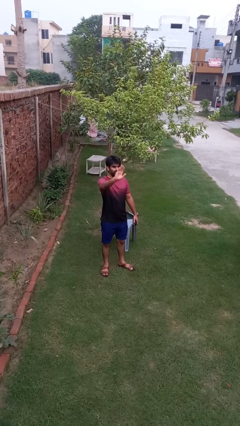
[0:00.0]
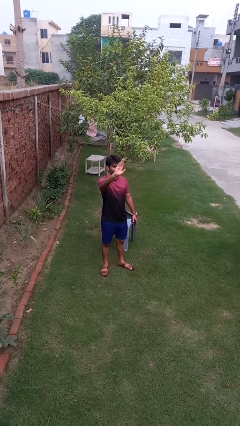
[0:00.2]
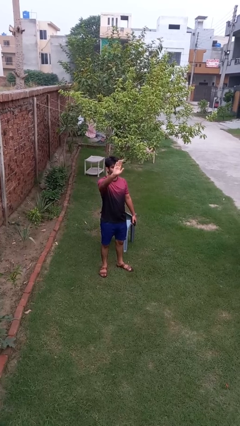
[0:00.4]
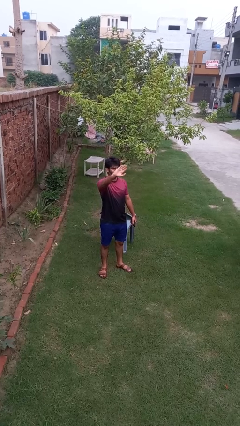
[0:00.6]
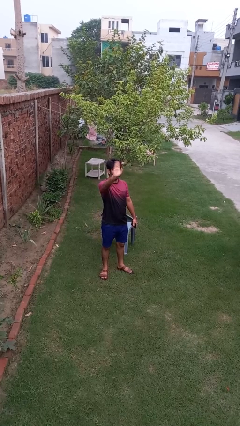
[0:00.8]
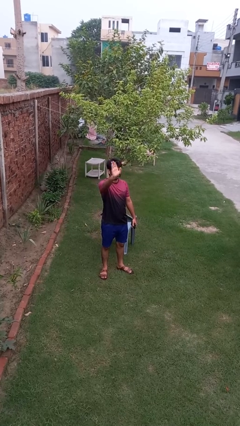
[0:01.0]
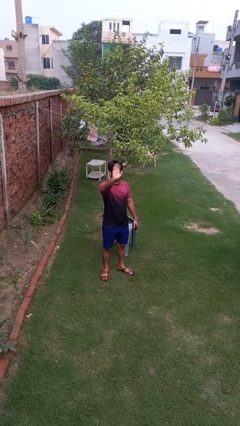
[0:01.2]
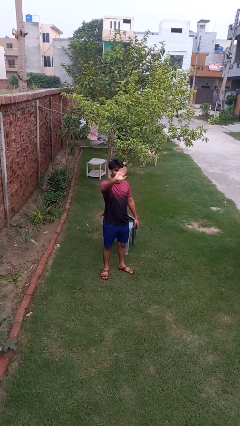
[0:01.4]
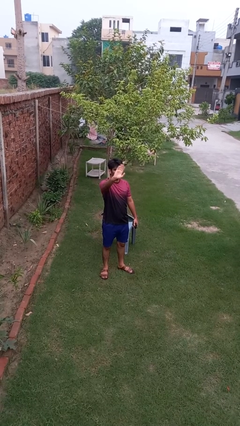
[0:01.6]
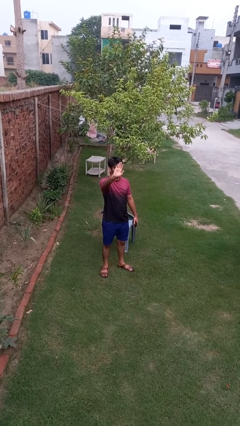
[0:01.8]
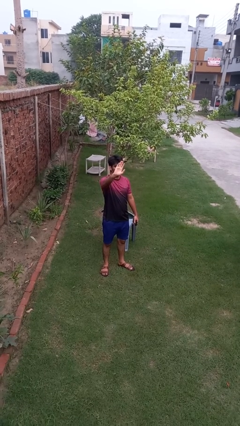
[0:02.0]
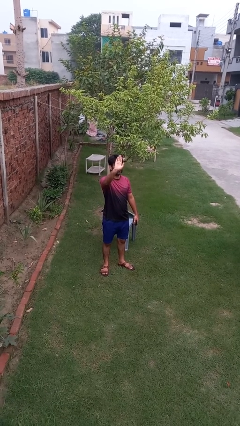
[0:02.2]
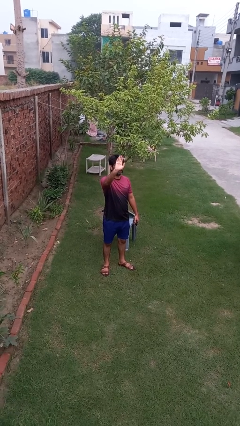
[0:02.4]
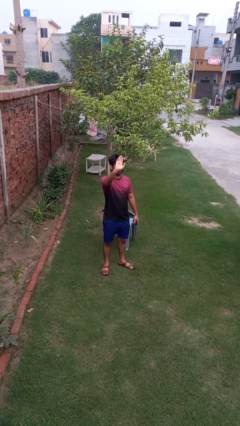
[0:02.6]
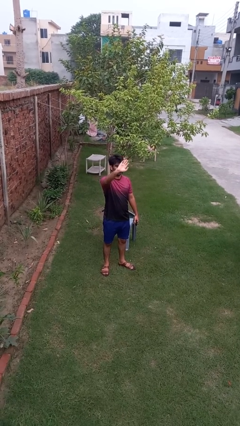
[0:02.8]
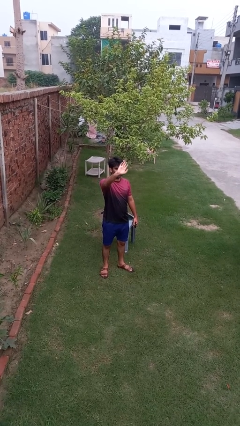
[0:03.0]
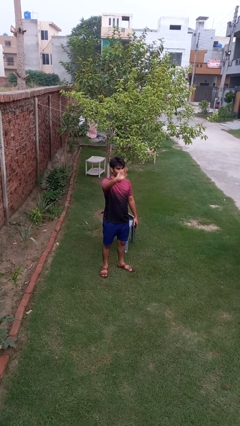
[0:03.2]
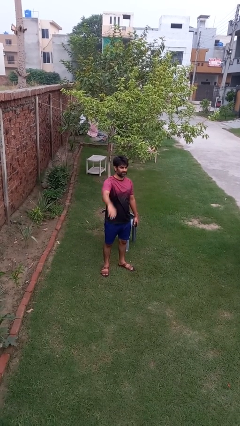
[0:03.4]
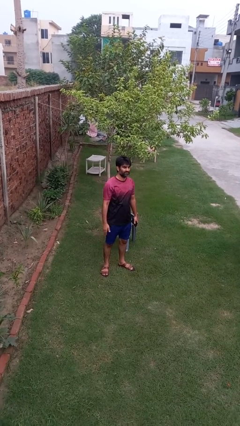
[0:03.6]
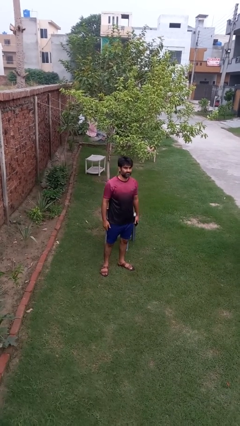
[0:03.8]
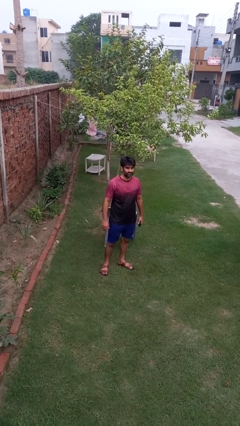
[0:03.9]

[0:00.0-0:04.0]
person waves at person

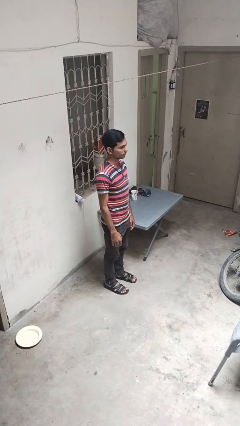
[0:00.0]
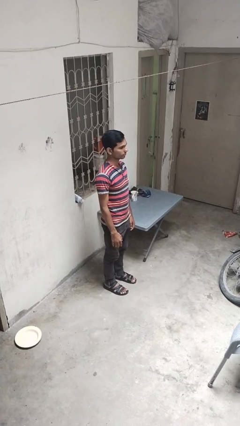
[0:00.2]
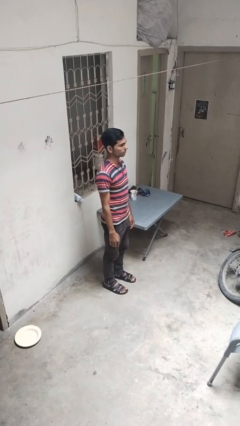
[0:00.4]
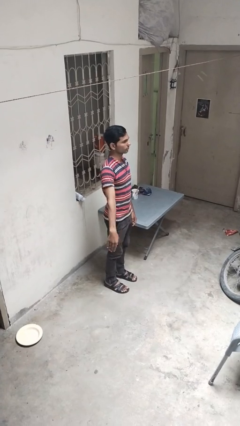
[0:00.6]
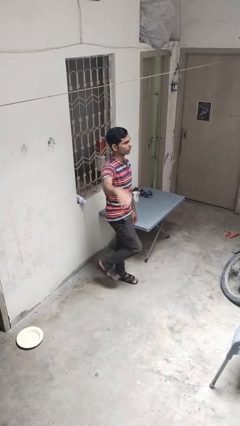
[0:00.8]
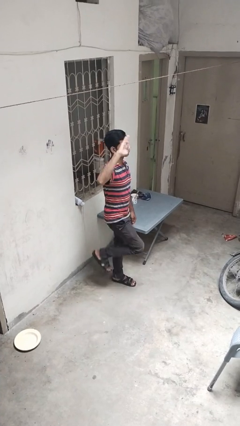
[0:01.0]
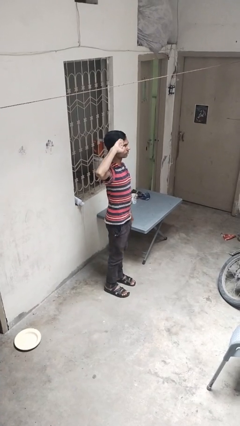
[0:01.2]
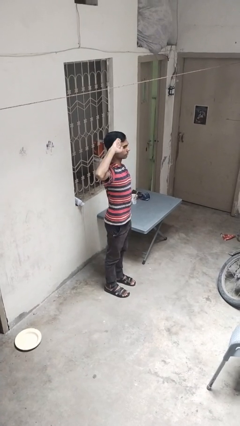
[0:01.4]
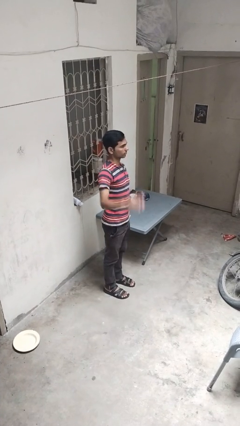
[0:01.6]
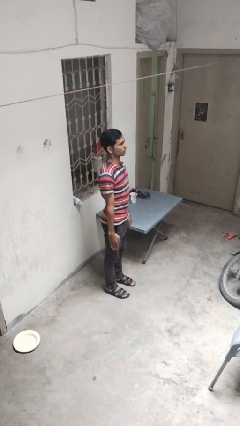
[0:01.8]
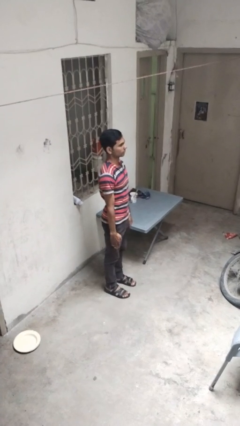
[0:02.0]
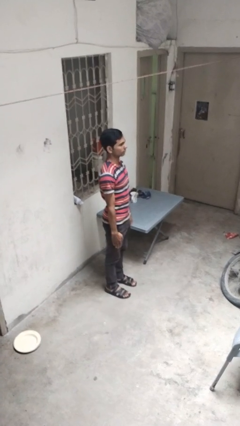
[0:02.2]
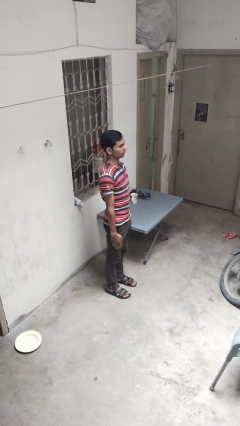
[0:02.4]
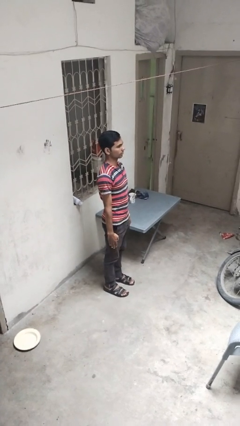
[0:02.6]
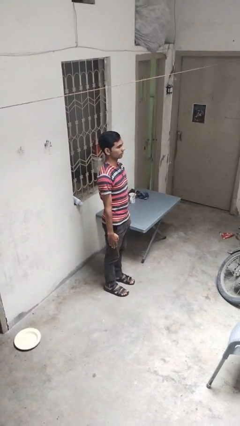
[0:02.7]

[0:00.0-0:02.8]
person salutes

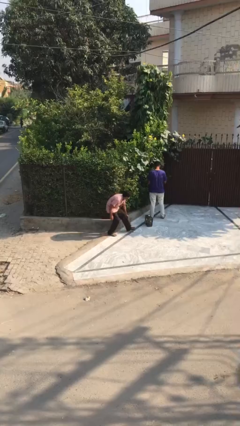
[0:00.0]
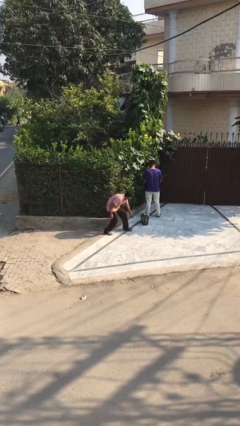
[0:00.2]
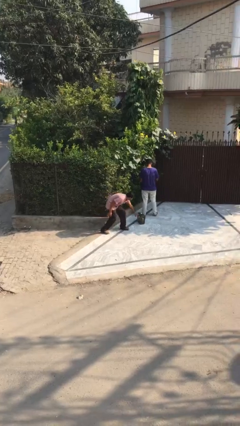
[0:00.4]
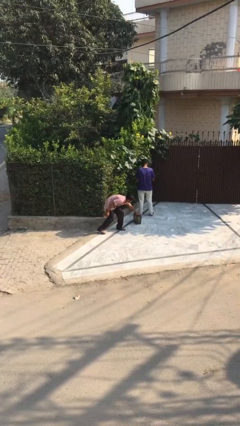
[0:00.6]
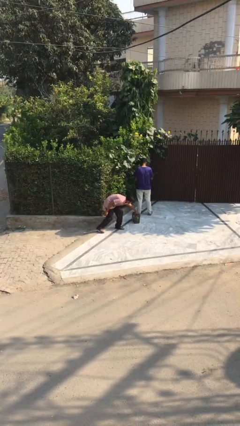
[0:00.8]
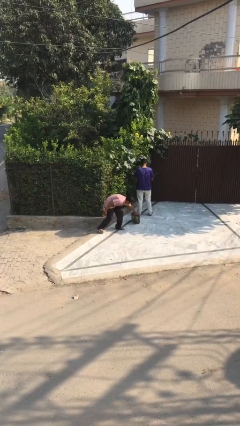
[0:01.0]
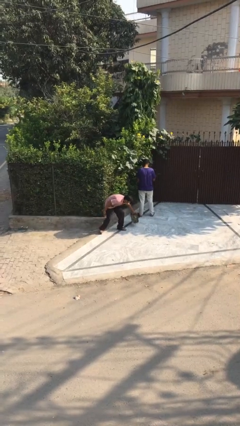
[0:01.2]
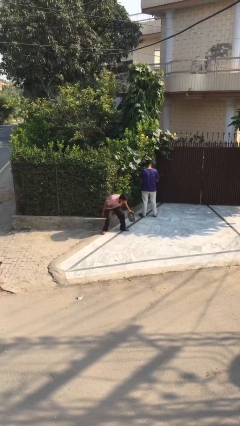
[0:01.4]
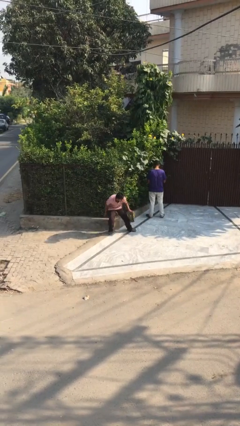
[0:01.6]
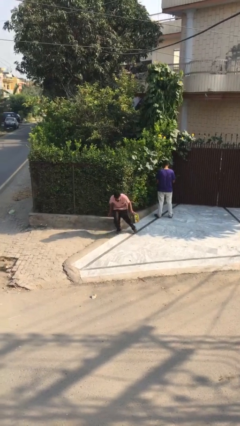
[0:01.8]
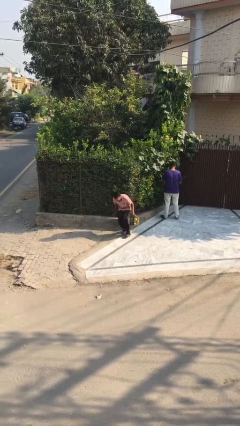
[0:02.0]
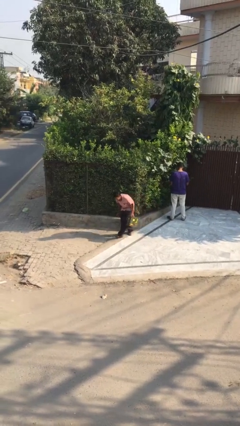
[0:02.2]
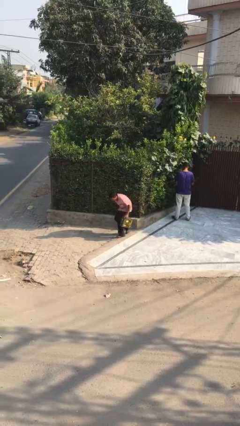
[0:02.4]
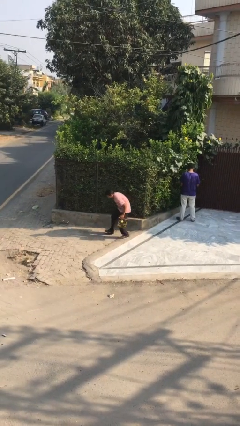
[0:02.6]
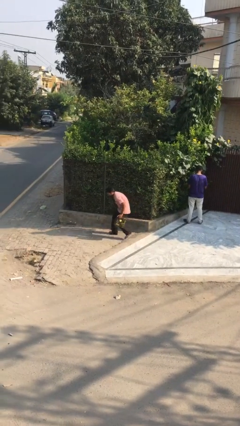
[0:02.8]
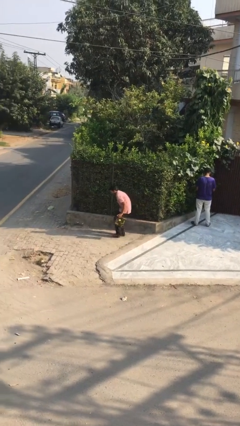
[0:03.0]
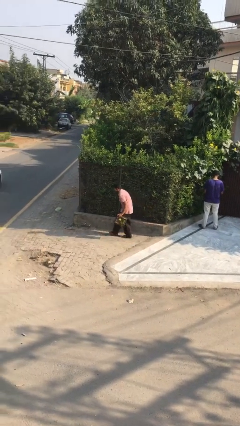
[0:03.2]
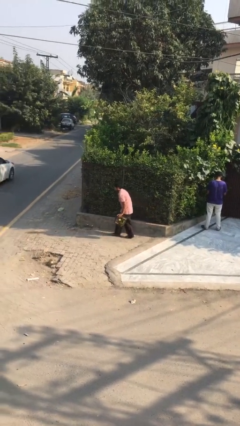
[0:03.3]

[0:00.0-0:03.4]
person steals object from person

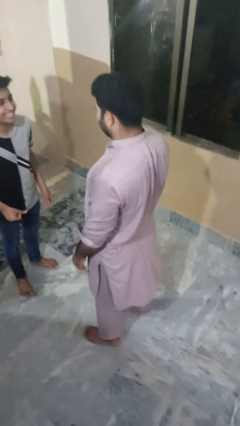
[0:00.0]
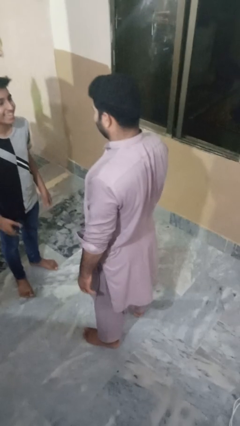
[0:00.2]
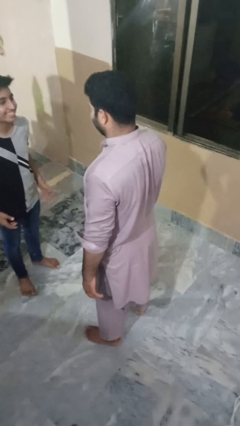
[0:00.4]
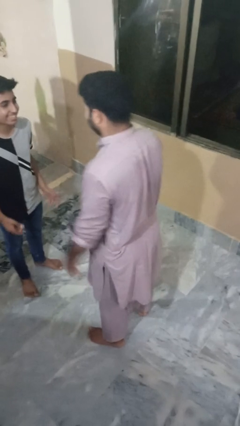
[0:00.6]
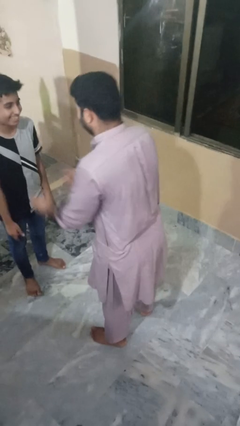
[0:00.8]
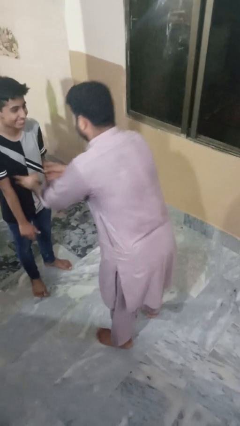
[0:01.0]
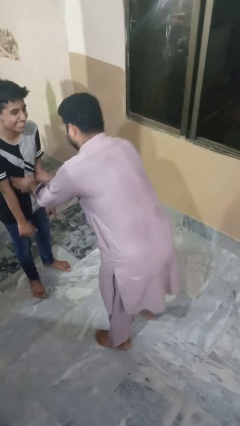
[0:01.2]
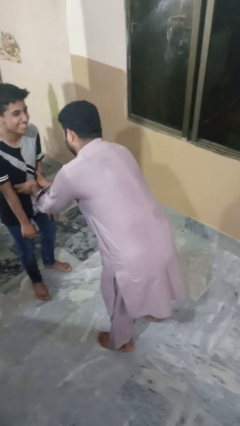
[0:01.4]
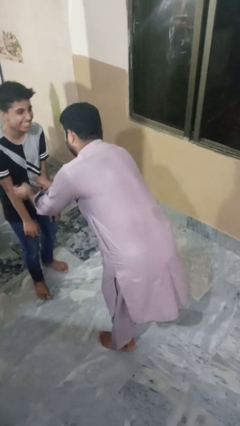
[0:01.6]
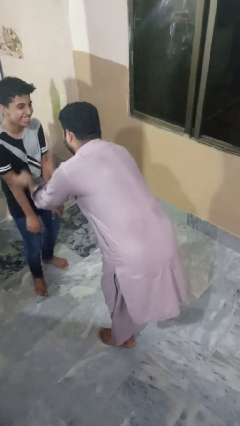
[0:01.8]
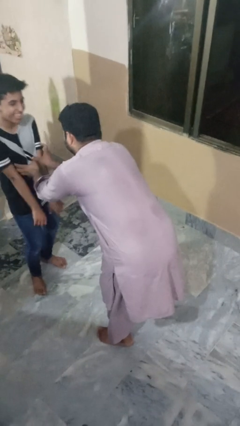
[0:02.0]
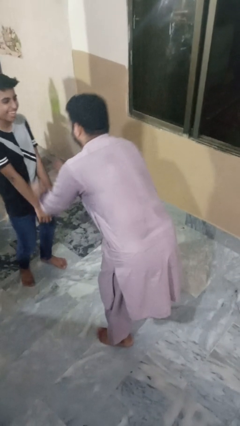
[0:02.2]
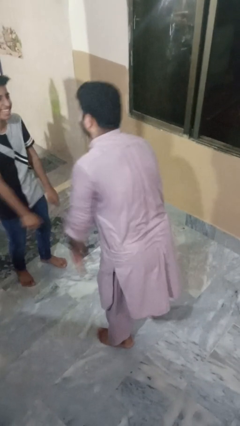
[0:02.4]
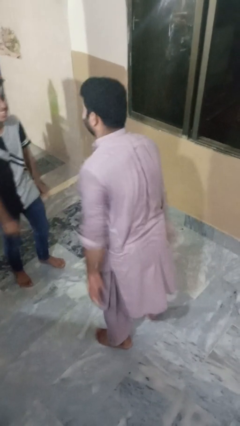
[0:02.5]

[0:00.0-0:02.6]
person tickles person

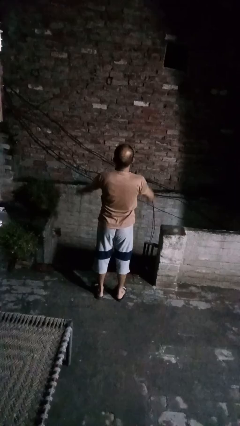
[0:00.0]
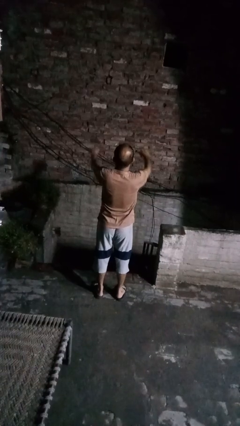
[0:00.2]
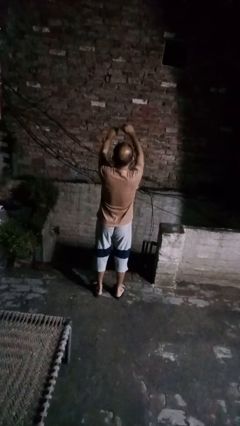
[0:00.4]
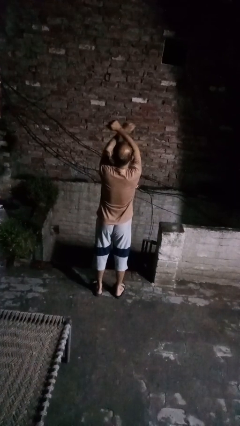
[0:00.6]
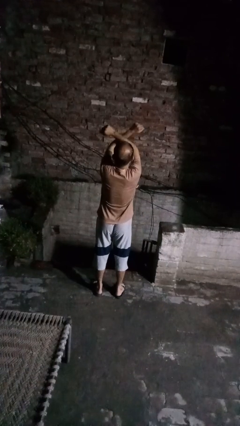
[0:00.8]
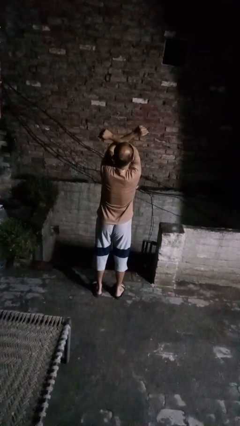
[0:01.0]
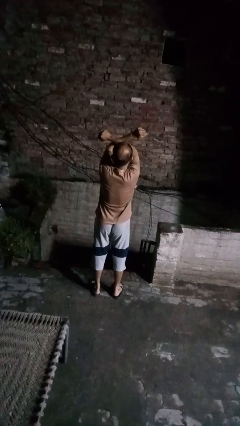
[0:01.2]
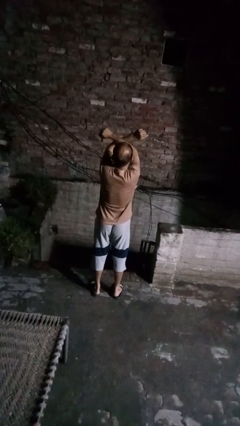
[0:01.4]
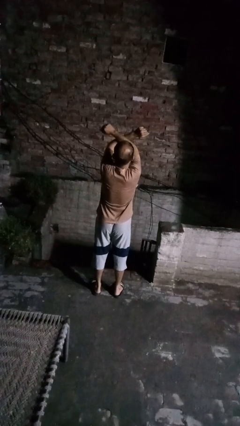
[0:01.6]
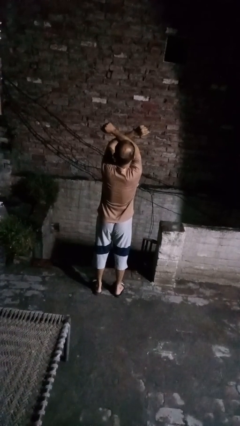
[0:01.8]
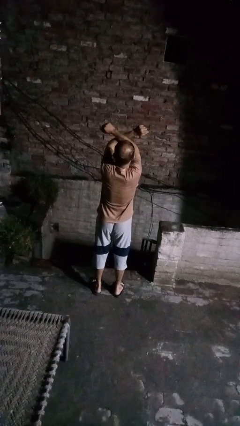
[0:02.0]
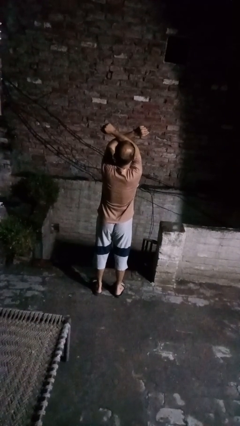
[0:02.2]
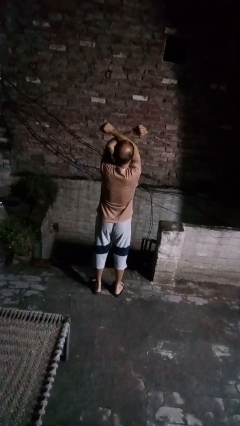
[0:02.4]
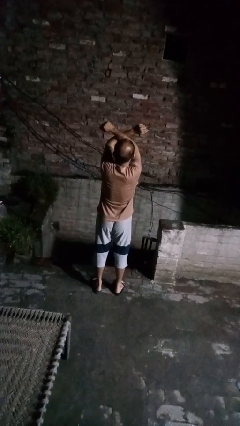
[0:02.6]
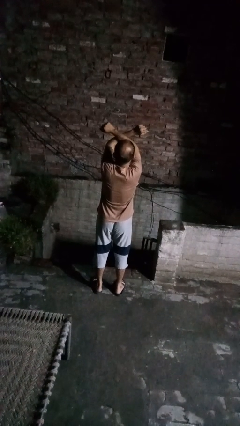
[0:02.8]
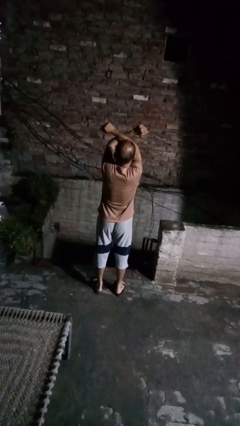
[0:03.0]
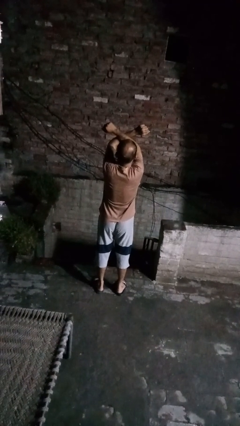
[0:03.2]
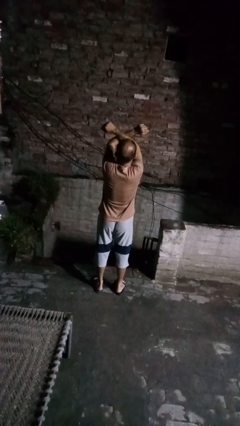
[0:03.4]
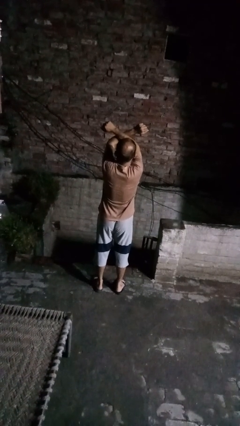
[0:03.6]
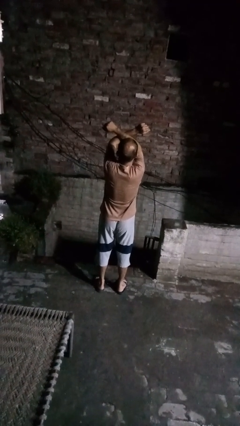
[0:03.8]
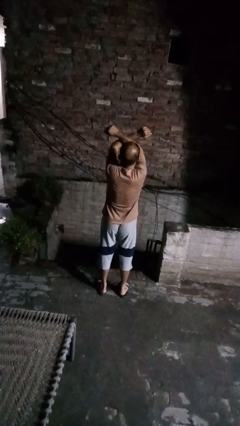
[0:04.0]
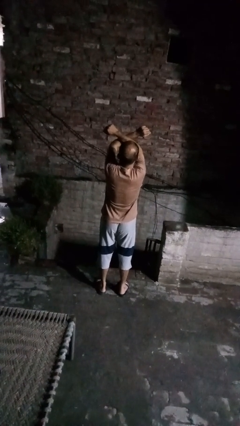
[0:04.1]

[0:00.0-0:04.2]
person gestures arms x

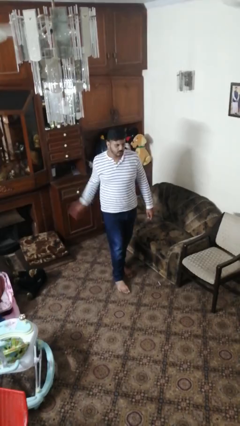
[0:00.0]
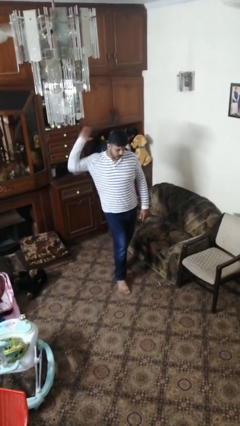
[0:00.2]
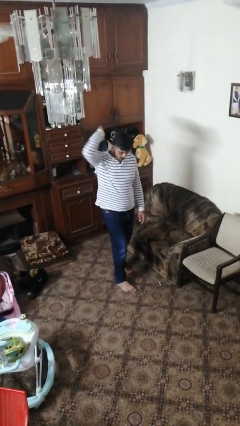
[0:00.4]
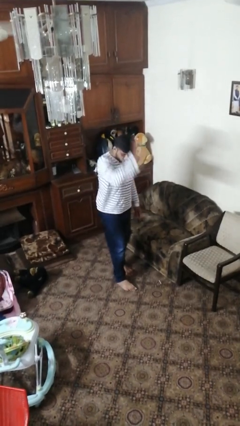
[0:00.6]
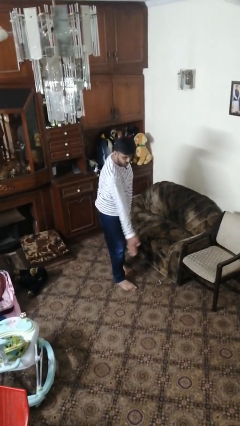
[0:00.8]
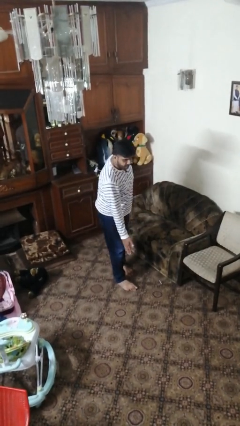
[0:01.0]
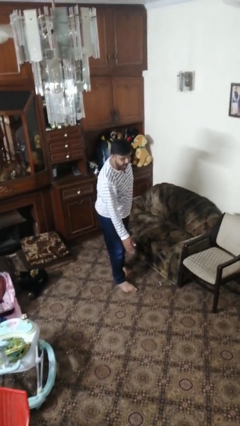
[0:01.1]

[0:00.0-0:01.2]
person karate chop
